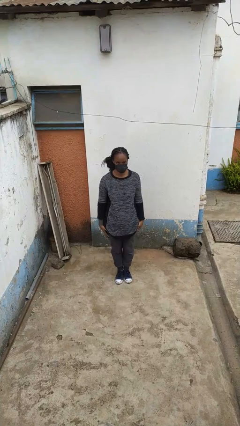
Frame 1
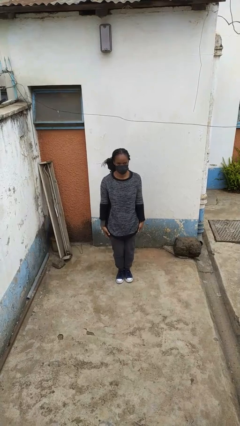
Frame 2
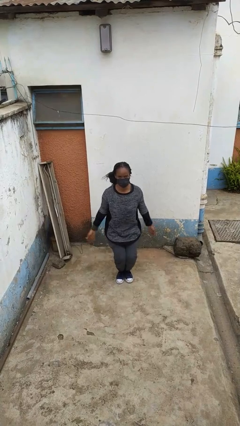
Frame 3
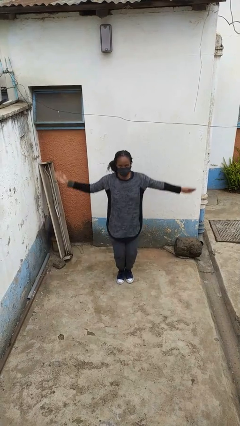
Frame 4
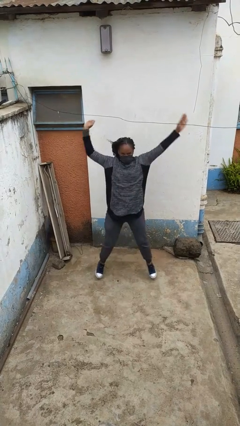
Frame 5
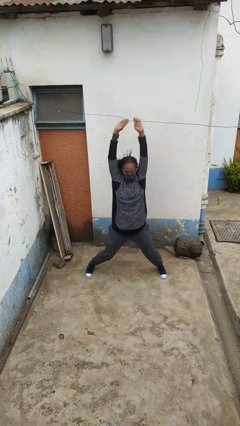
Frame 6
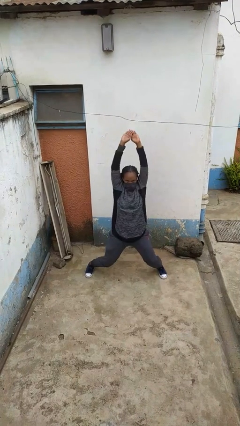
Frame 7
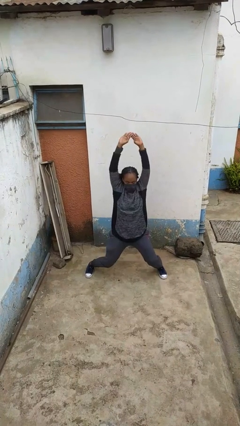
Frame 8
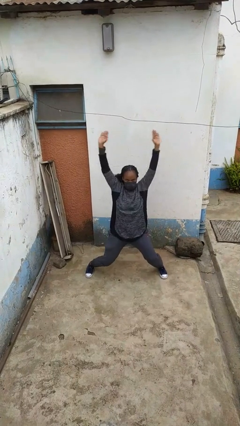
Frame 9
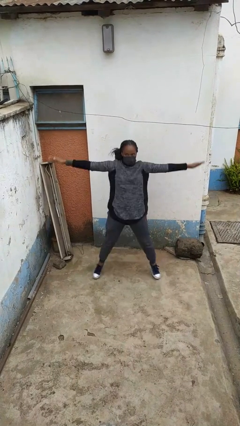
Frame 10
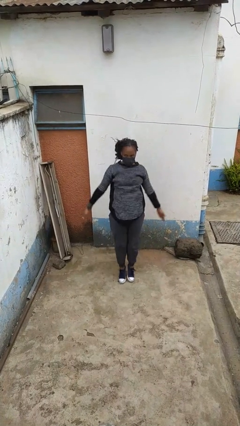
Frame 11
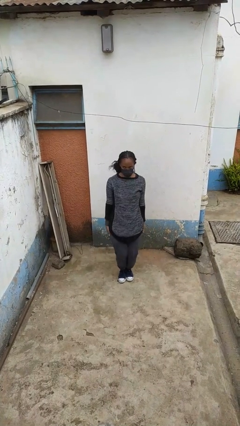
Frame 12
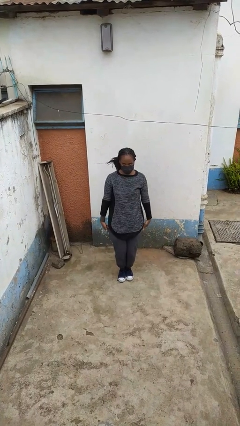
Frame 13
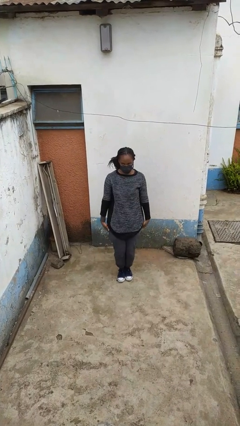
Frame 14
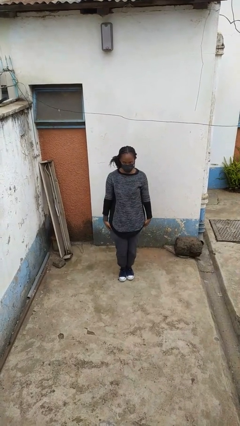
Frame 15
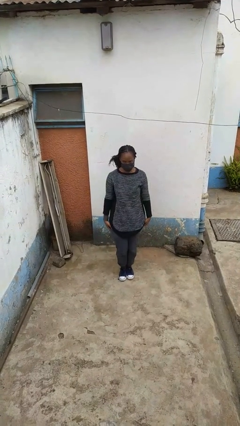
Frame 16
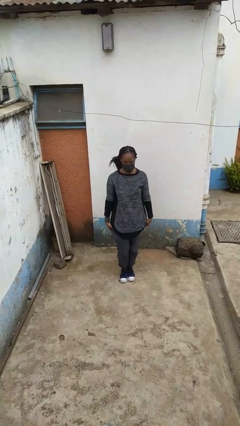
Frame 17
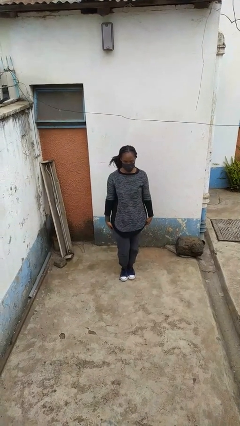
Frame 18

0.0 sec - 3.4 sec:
person exercises with jumping jacks

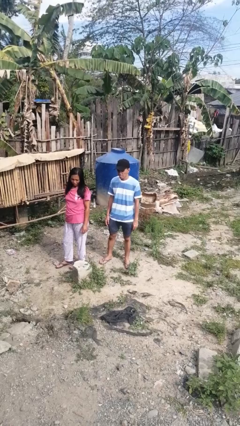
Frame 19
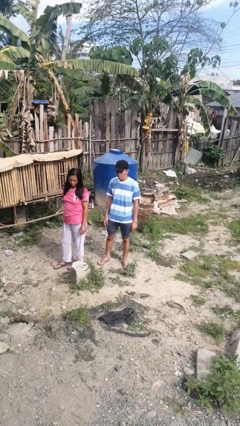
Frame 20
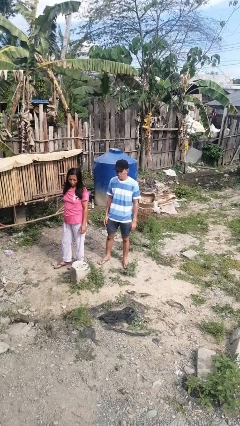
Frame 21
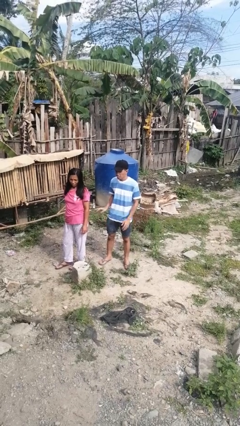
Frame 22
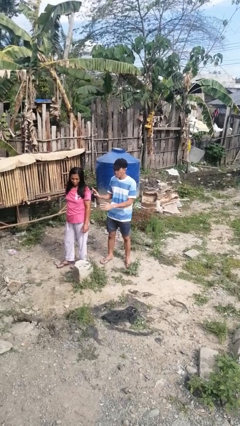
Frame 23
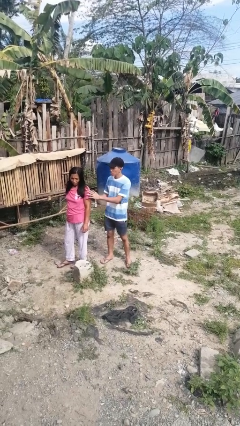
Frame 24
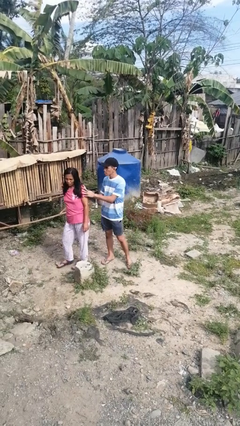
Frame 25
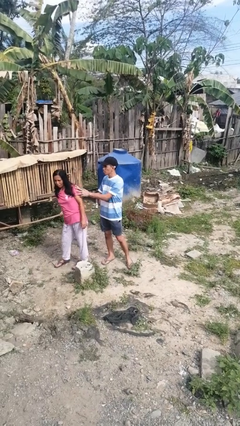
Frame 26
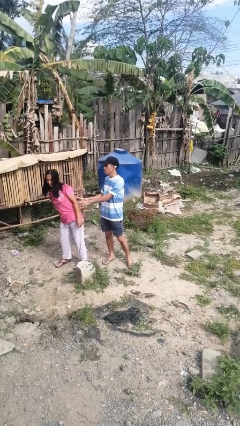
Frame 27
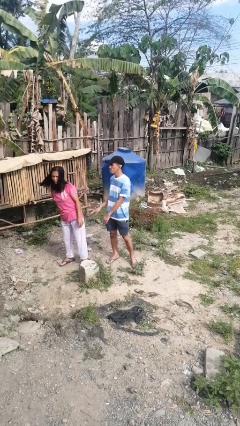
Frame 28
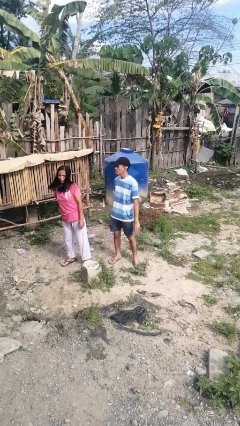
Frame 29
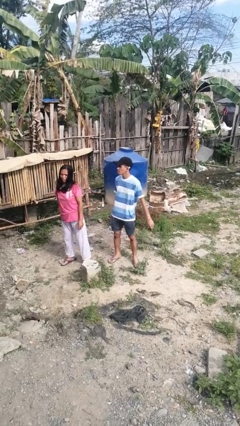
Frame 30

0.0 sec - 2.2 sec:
person shoves person

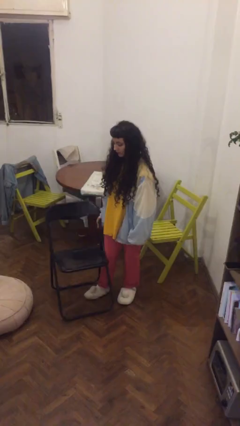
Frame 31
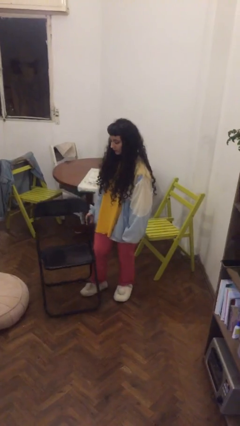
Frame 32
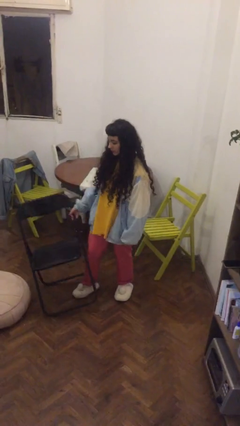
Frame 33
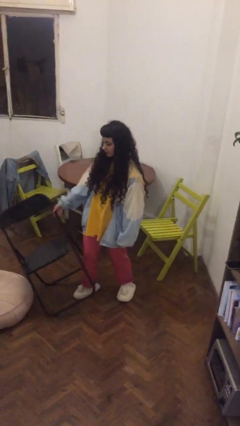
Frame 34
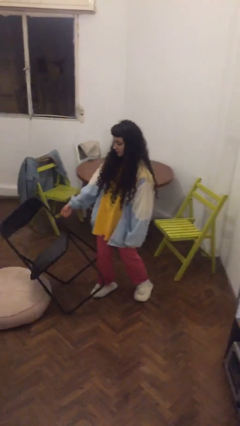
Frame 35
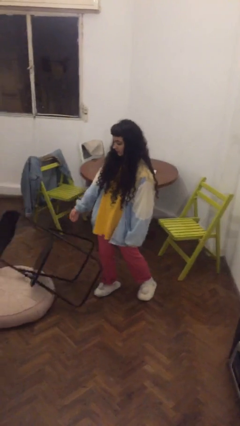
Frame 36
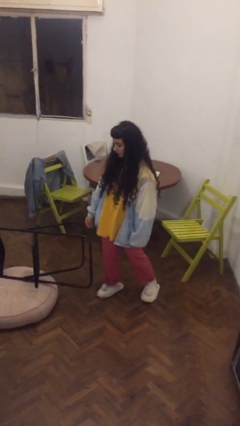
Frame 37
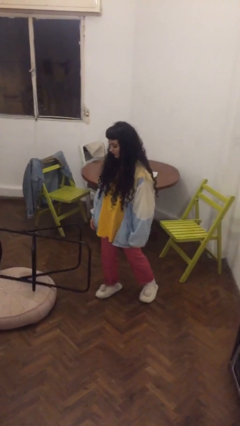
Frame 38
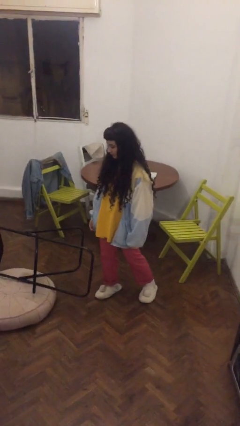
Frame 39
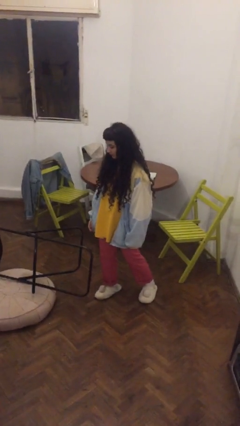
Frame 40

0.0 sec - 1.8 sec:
person knocks over furniture

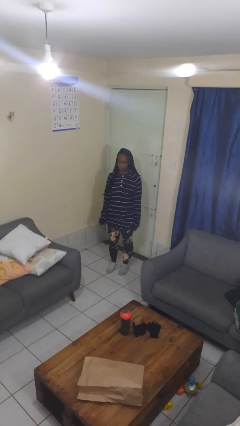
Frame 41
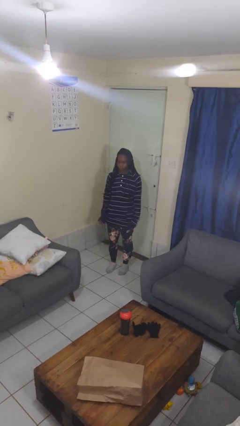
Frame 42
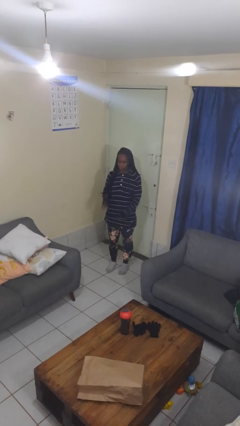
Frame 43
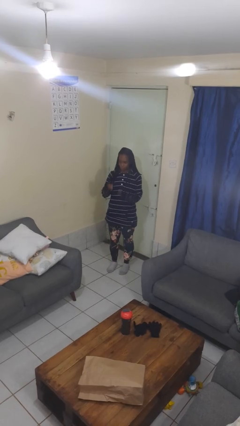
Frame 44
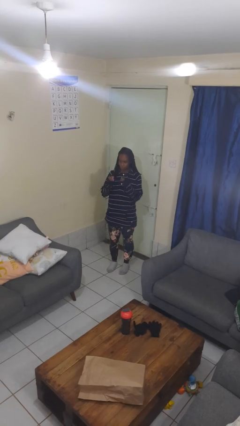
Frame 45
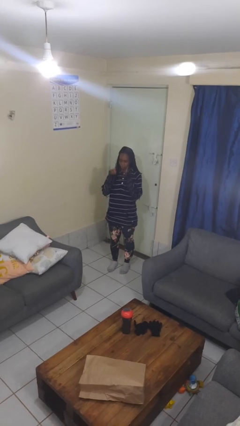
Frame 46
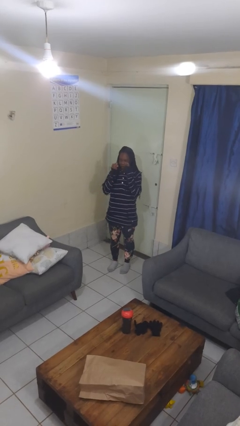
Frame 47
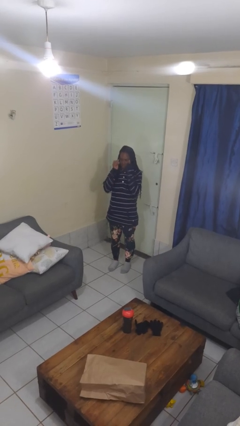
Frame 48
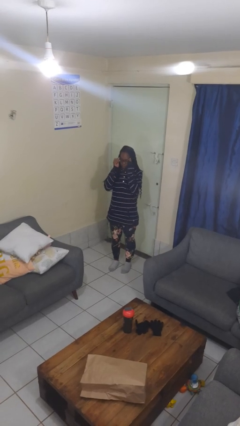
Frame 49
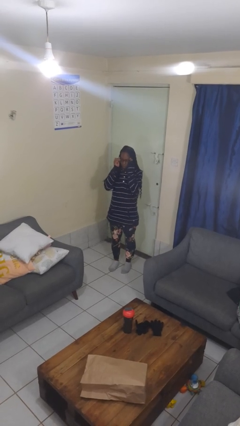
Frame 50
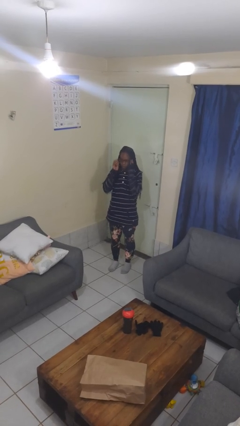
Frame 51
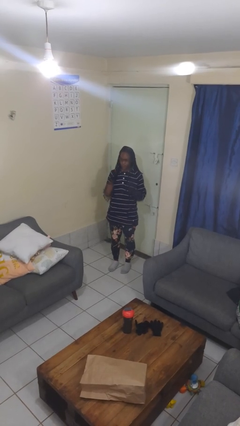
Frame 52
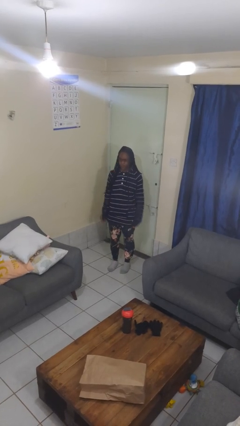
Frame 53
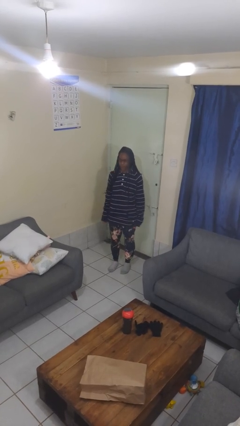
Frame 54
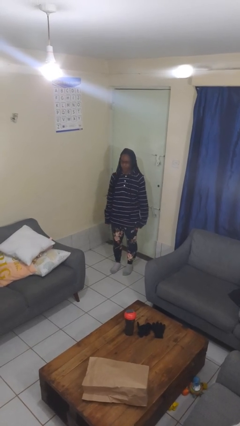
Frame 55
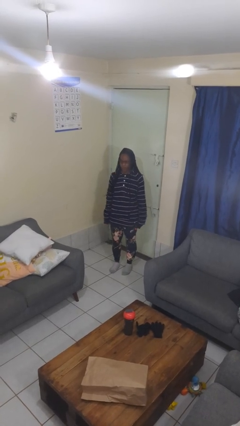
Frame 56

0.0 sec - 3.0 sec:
person puts on glasses

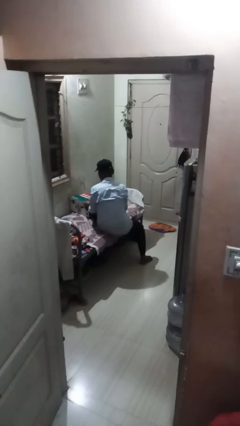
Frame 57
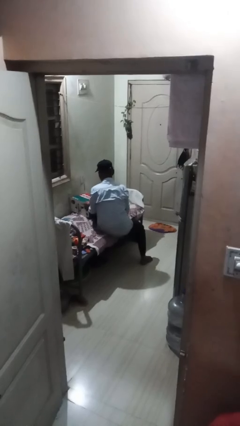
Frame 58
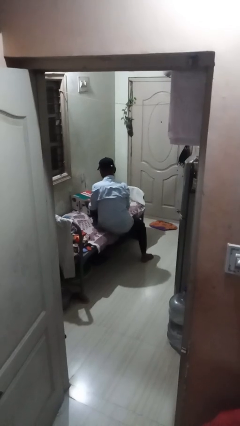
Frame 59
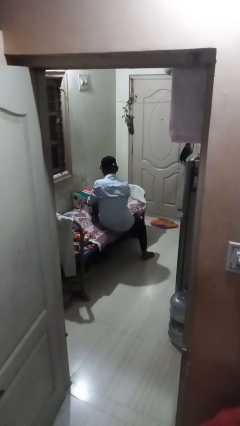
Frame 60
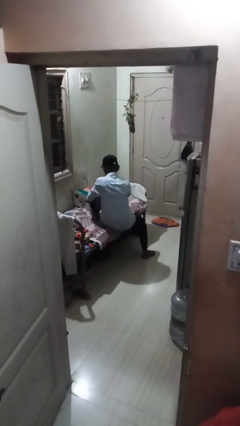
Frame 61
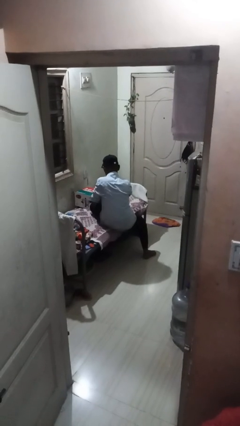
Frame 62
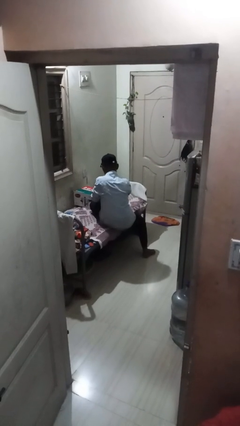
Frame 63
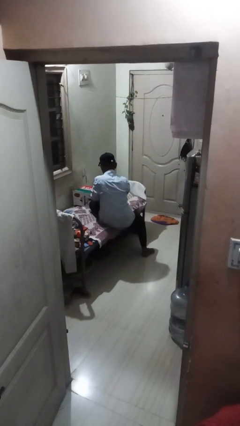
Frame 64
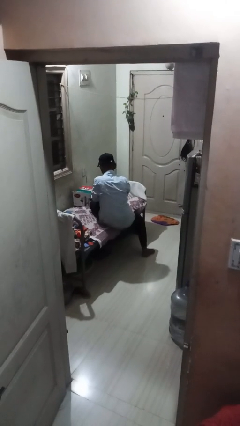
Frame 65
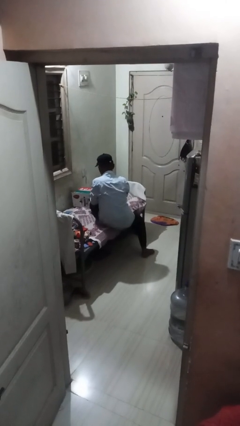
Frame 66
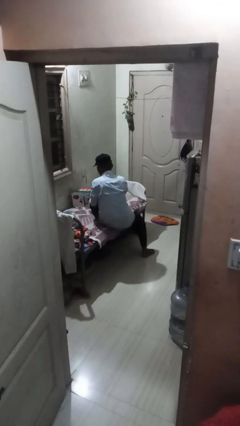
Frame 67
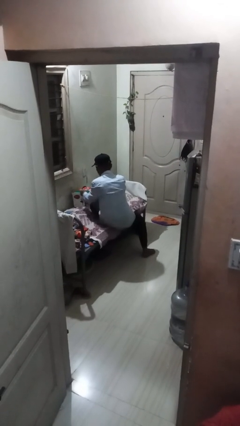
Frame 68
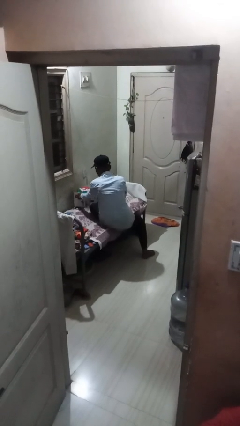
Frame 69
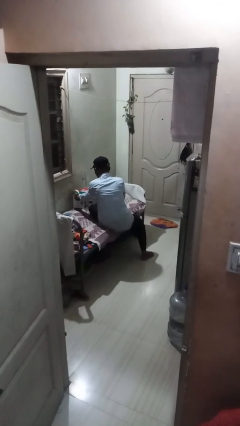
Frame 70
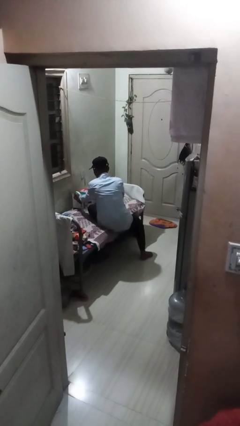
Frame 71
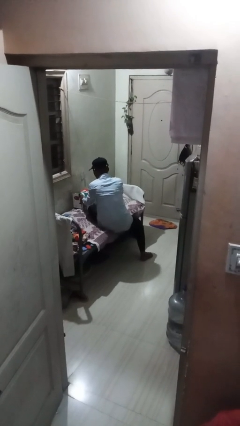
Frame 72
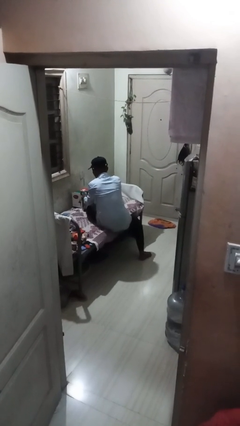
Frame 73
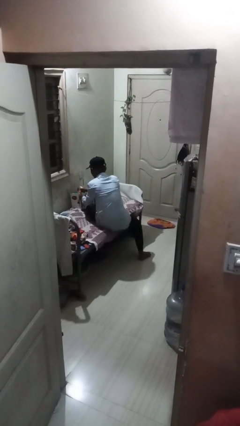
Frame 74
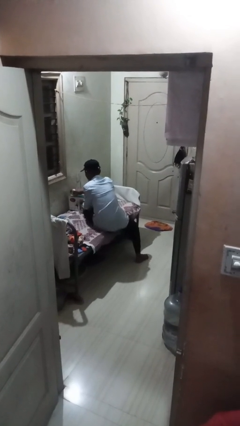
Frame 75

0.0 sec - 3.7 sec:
person wraps box

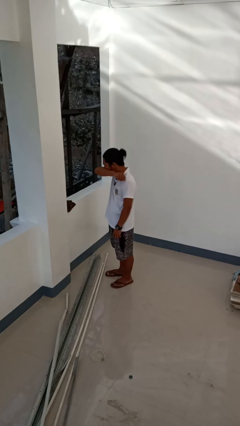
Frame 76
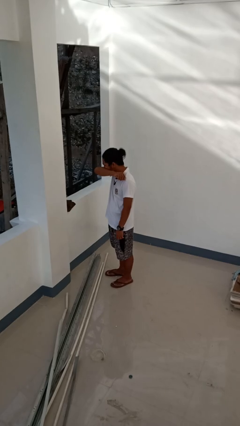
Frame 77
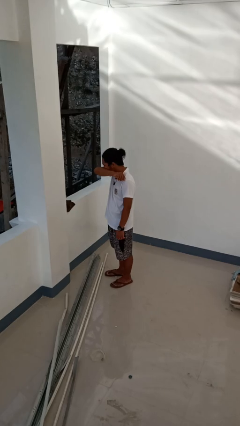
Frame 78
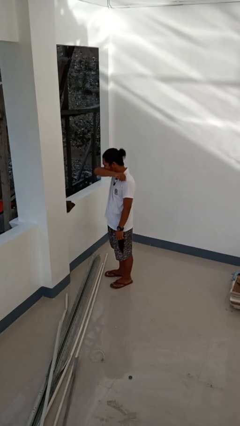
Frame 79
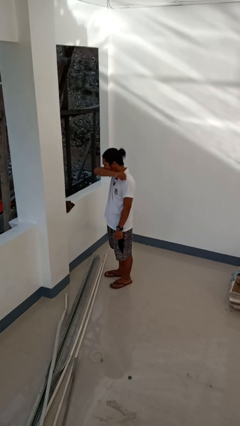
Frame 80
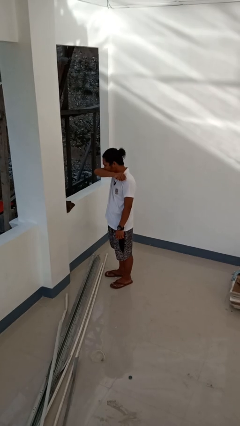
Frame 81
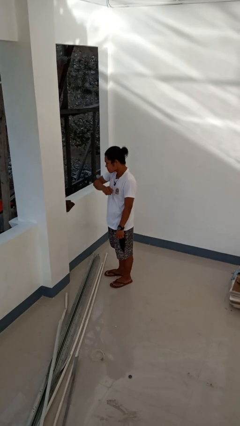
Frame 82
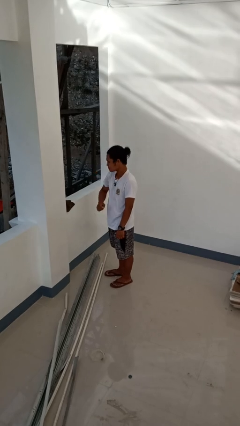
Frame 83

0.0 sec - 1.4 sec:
person sneezes into arm

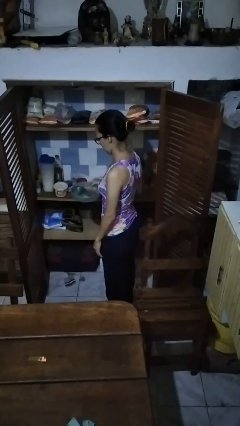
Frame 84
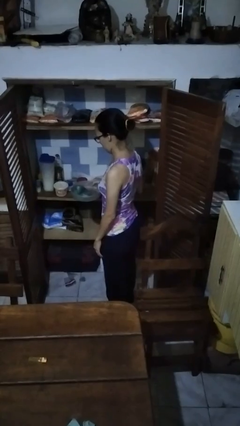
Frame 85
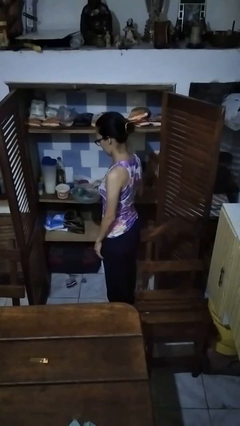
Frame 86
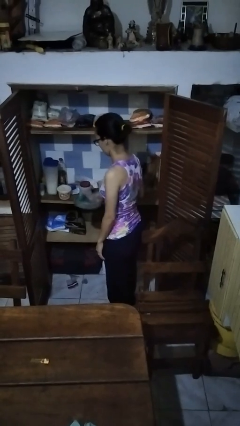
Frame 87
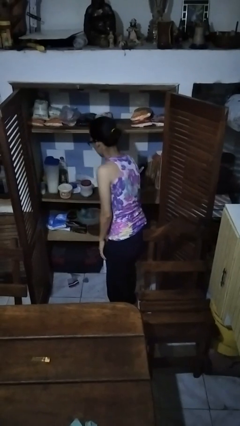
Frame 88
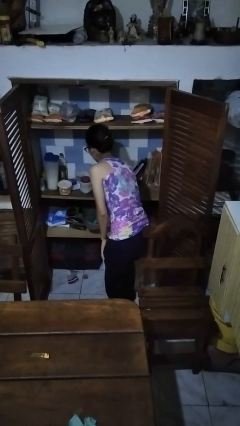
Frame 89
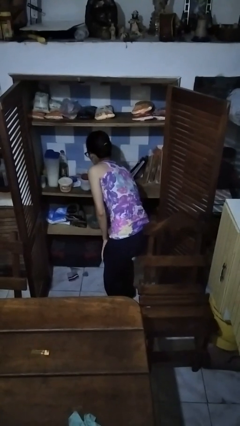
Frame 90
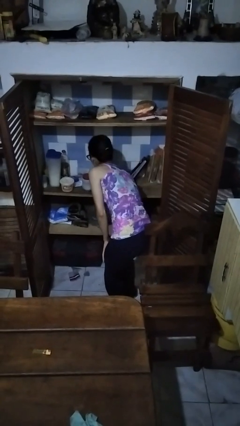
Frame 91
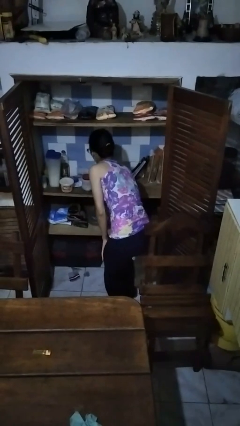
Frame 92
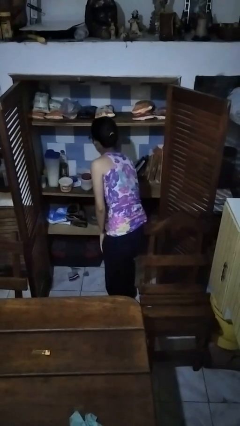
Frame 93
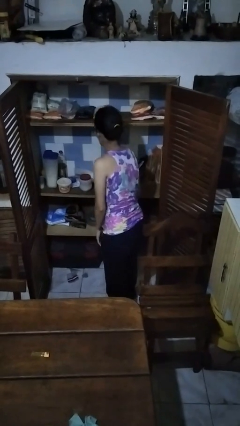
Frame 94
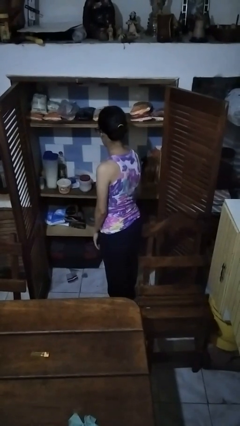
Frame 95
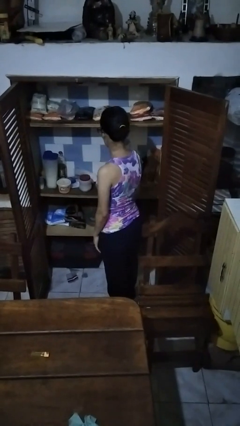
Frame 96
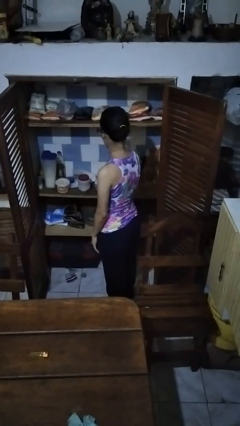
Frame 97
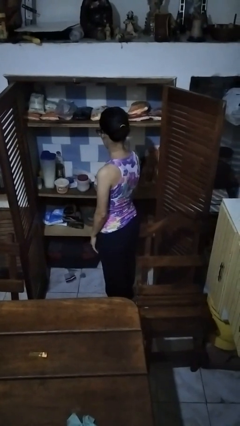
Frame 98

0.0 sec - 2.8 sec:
person puts object in cabinet
